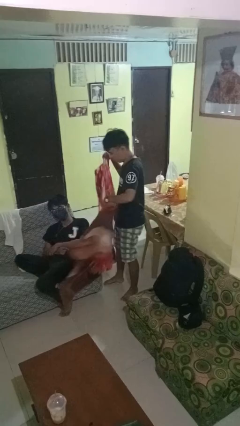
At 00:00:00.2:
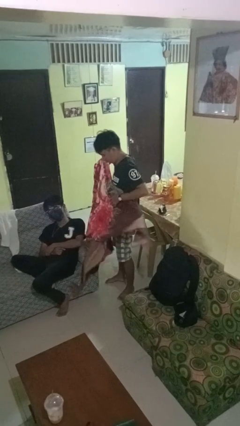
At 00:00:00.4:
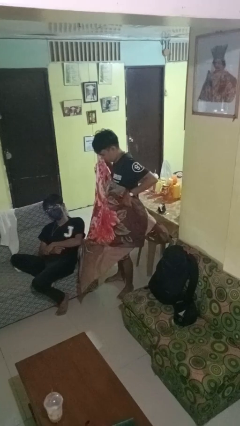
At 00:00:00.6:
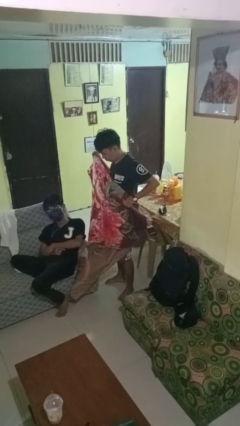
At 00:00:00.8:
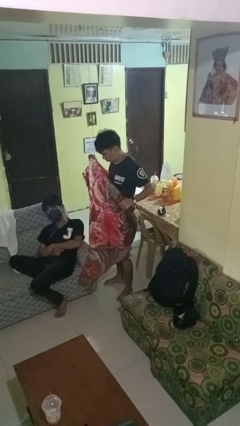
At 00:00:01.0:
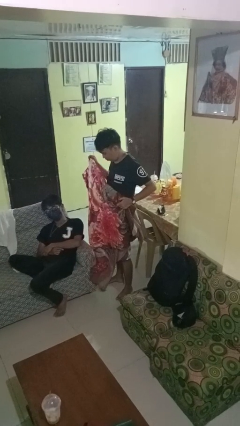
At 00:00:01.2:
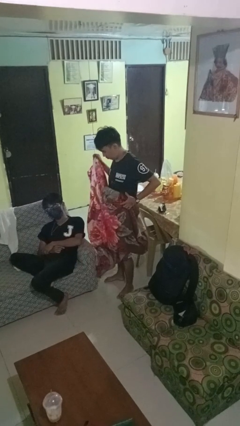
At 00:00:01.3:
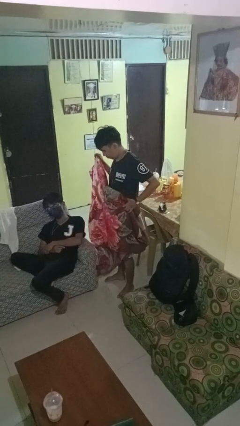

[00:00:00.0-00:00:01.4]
person uncovers friend with blanket

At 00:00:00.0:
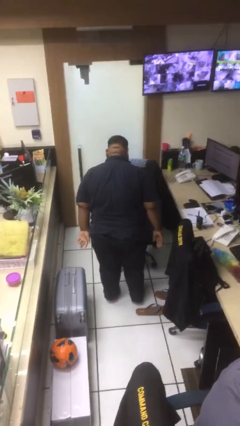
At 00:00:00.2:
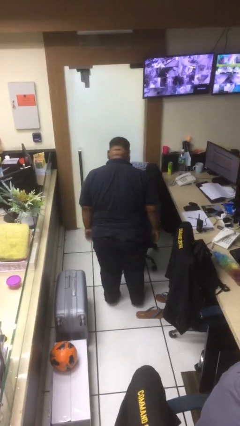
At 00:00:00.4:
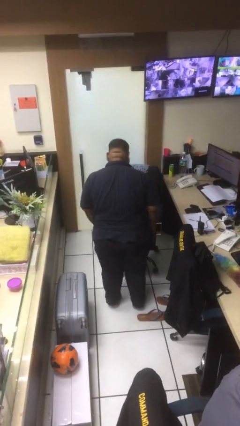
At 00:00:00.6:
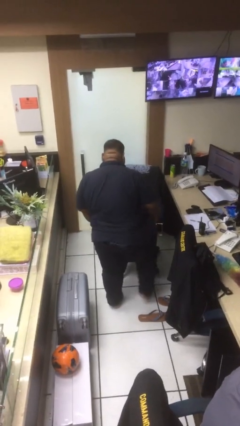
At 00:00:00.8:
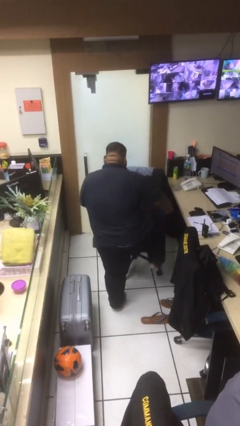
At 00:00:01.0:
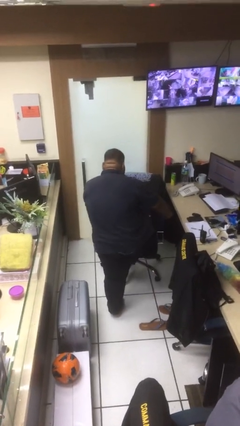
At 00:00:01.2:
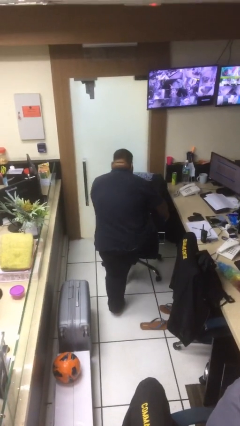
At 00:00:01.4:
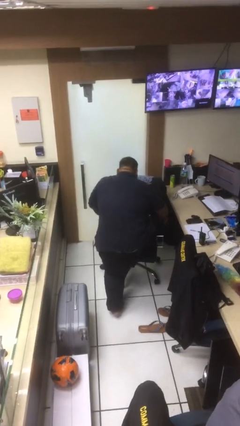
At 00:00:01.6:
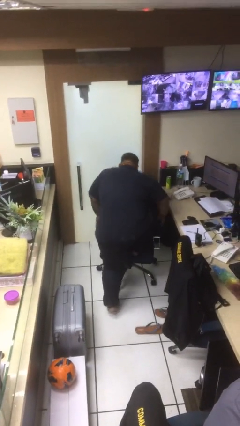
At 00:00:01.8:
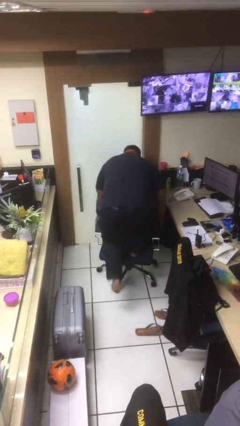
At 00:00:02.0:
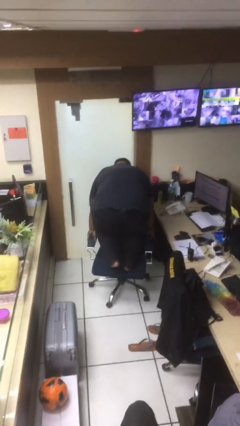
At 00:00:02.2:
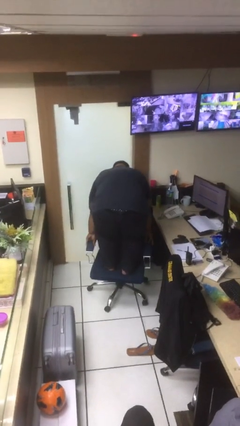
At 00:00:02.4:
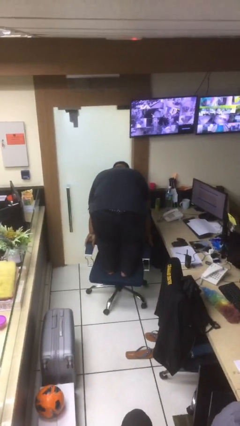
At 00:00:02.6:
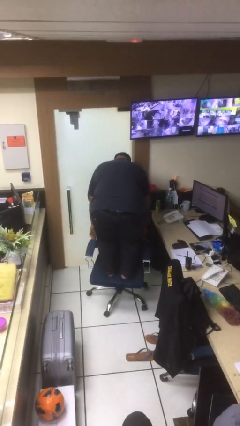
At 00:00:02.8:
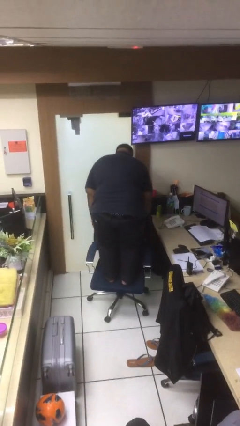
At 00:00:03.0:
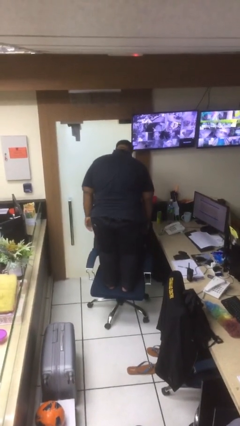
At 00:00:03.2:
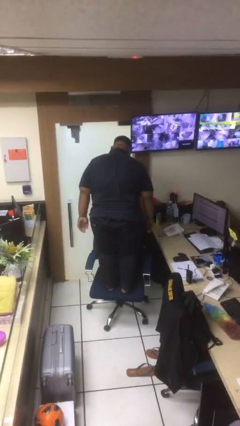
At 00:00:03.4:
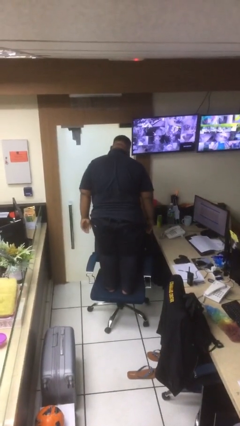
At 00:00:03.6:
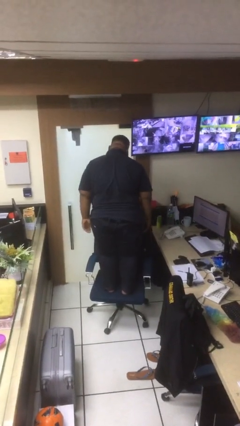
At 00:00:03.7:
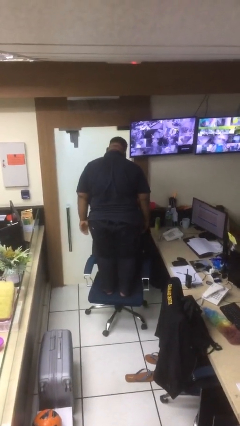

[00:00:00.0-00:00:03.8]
person climbs on chair

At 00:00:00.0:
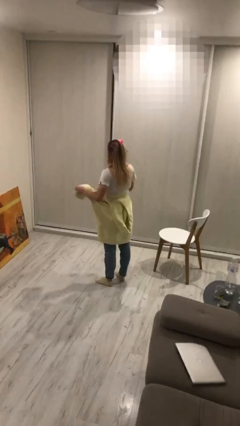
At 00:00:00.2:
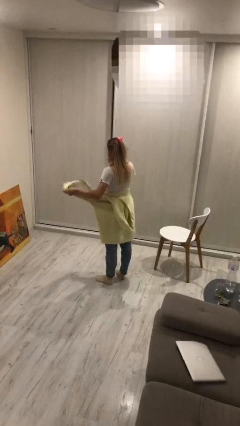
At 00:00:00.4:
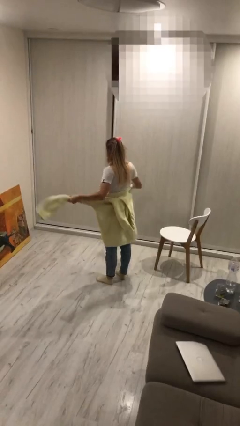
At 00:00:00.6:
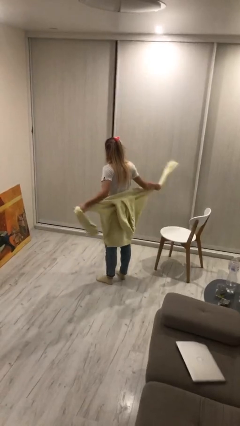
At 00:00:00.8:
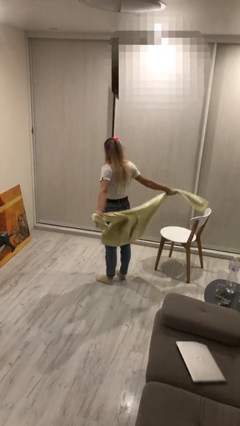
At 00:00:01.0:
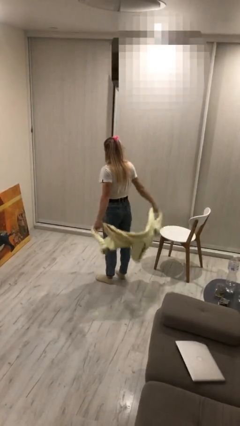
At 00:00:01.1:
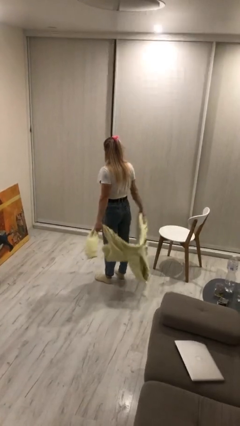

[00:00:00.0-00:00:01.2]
person unties jacket around waist

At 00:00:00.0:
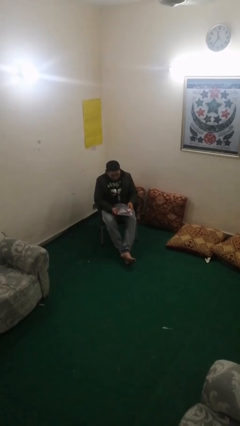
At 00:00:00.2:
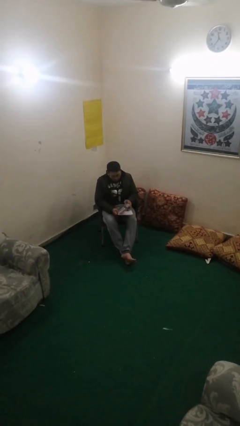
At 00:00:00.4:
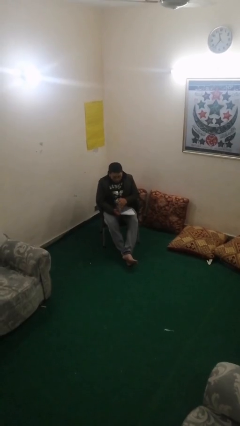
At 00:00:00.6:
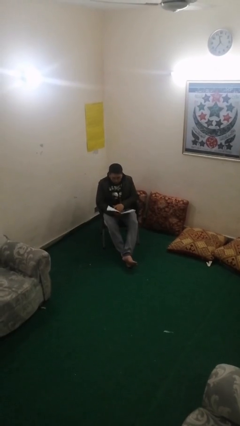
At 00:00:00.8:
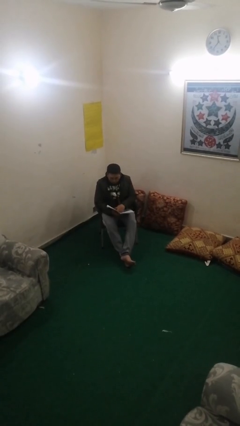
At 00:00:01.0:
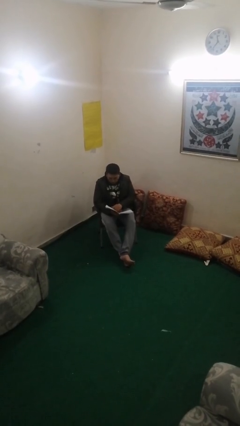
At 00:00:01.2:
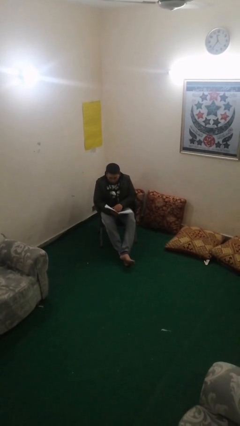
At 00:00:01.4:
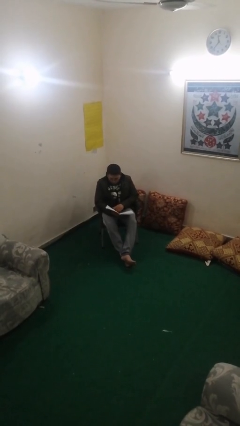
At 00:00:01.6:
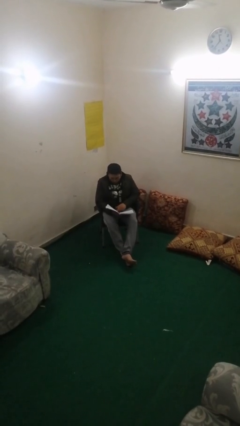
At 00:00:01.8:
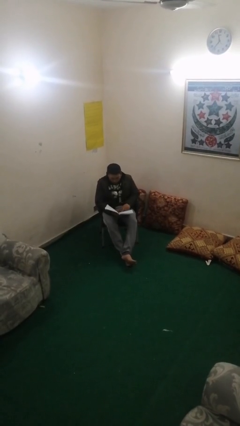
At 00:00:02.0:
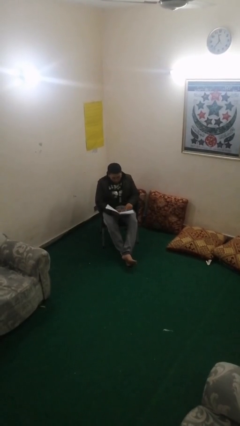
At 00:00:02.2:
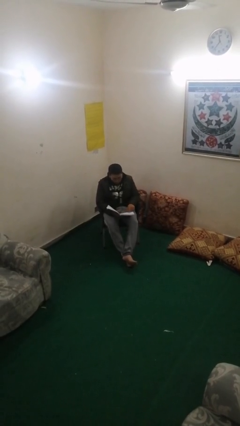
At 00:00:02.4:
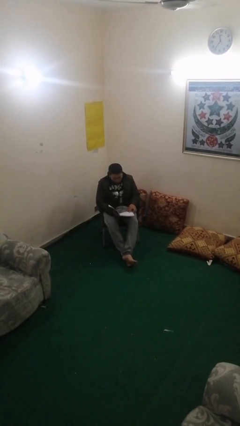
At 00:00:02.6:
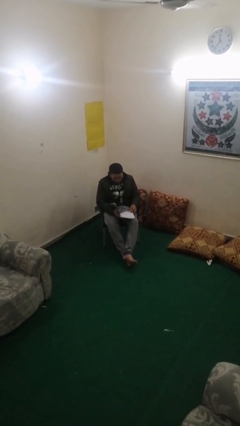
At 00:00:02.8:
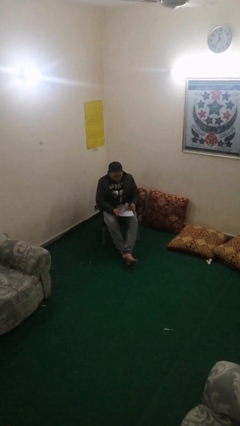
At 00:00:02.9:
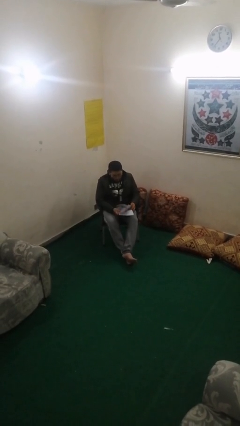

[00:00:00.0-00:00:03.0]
person reads document

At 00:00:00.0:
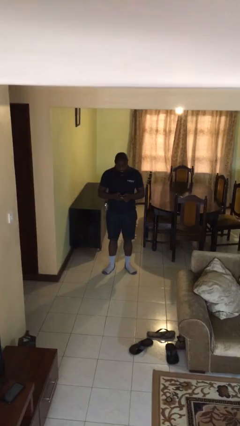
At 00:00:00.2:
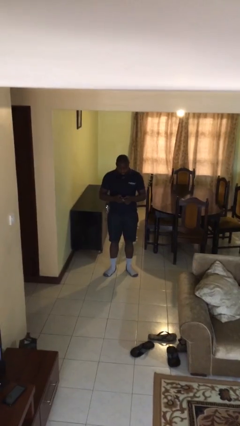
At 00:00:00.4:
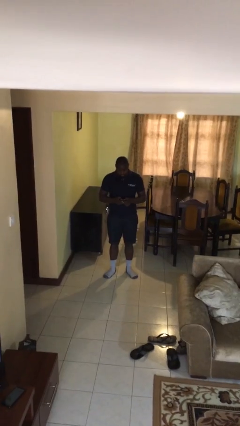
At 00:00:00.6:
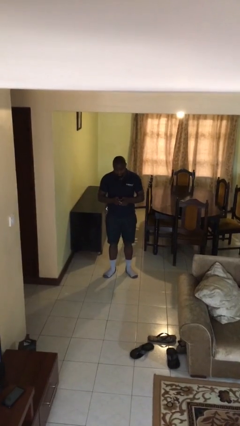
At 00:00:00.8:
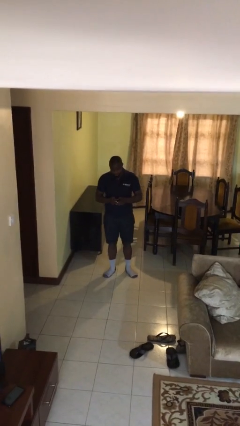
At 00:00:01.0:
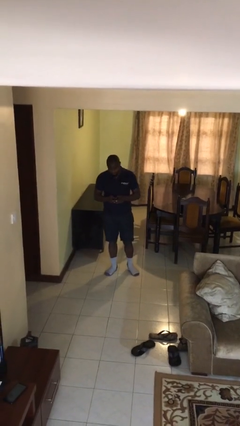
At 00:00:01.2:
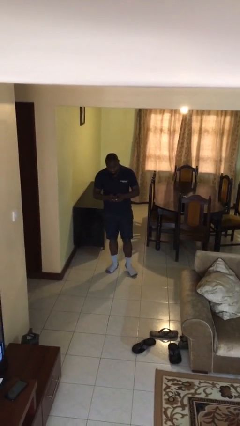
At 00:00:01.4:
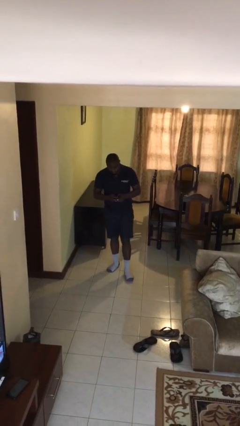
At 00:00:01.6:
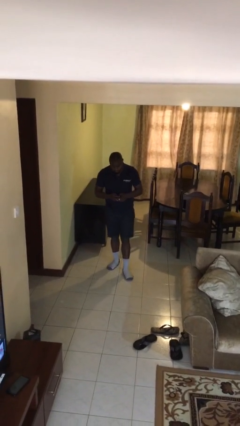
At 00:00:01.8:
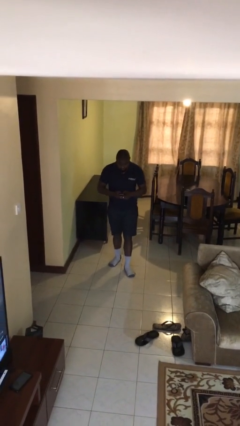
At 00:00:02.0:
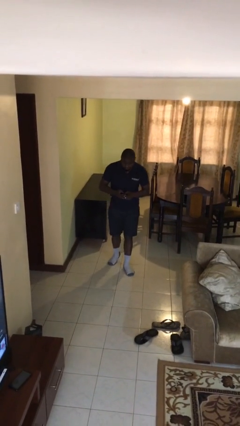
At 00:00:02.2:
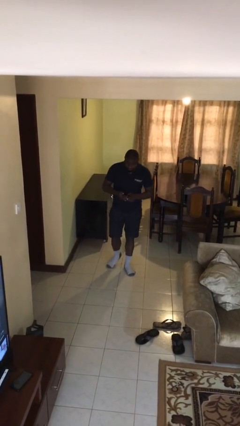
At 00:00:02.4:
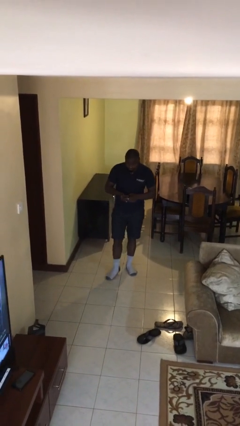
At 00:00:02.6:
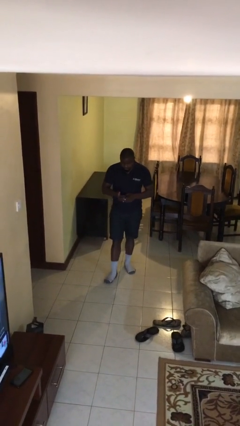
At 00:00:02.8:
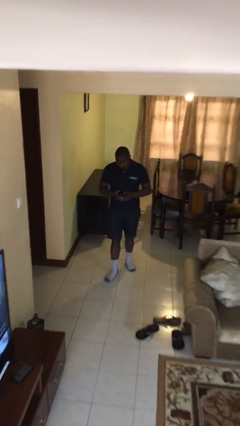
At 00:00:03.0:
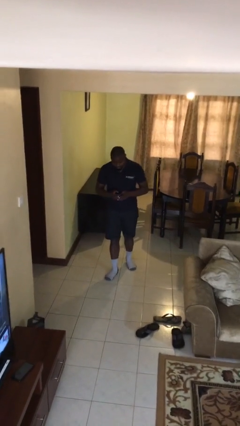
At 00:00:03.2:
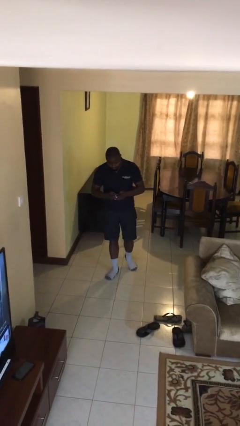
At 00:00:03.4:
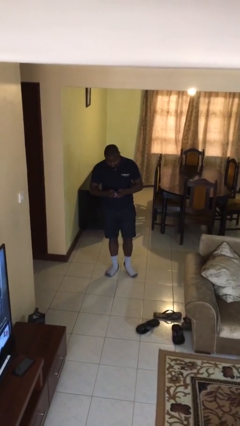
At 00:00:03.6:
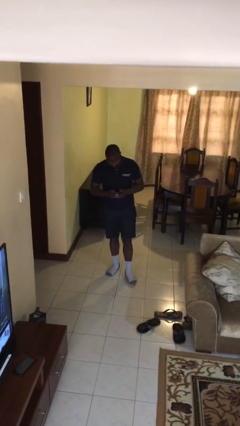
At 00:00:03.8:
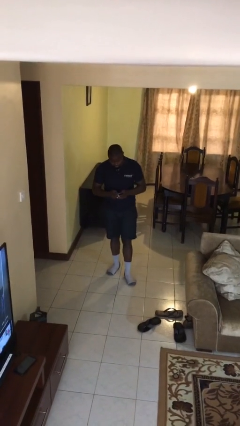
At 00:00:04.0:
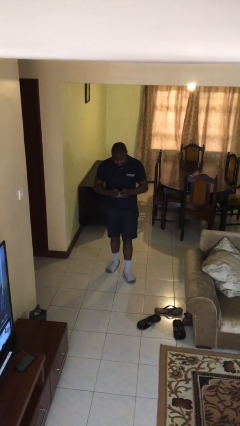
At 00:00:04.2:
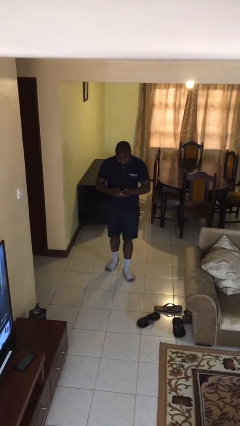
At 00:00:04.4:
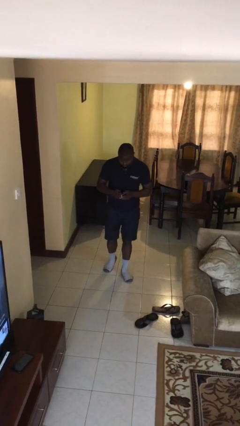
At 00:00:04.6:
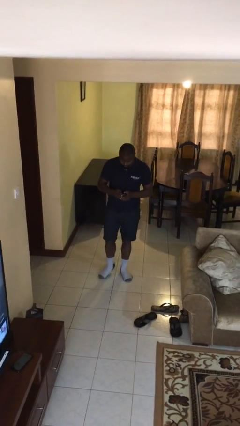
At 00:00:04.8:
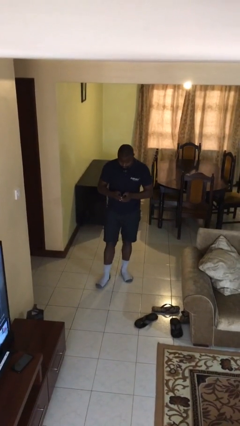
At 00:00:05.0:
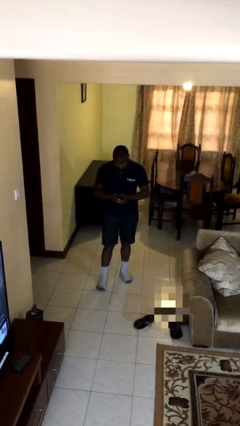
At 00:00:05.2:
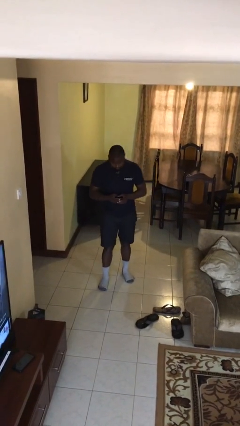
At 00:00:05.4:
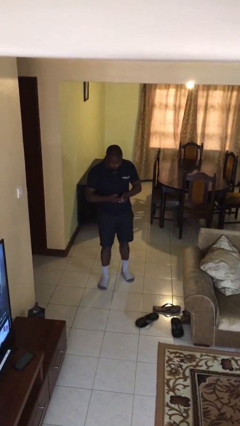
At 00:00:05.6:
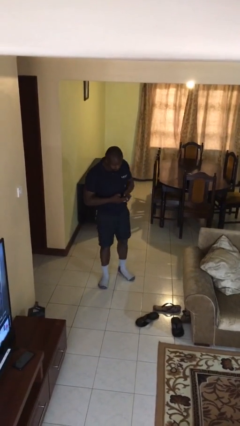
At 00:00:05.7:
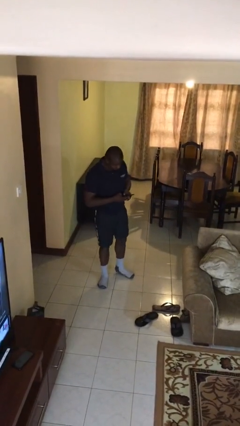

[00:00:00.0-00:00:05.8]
person texts on phone

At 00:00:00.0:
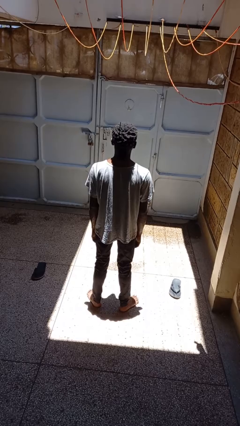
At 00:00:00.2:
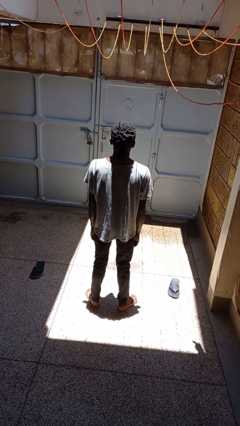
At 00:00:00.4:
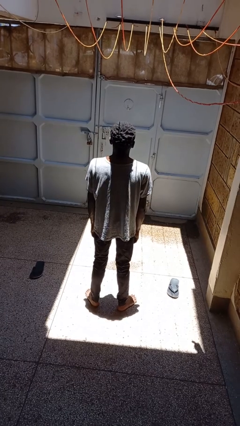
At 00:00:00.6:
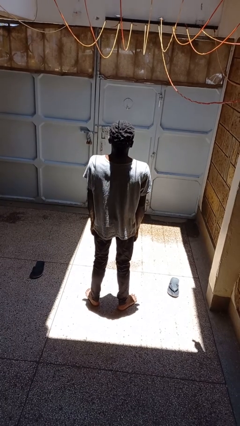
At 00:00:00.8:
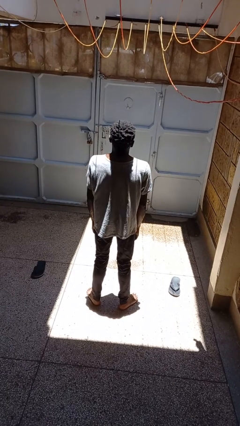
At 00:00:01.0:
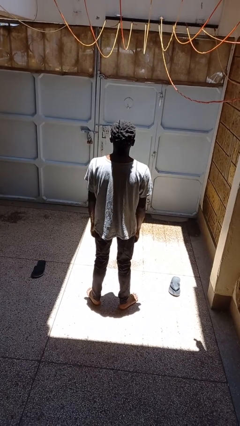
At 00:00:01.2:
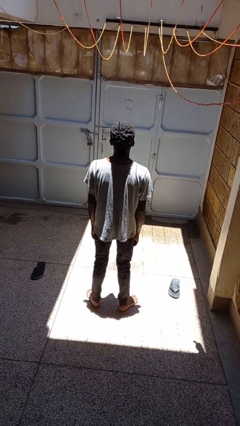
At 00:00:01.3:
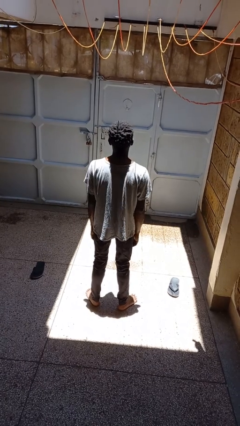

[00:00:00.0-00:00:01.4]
person shrugs
